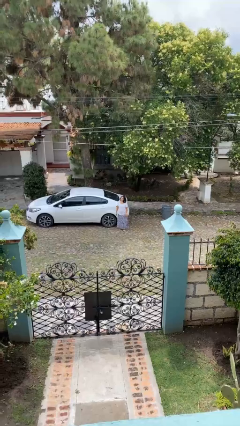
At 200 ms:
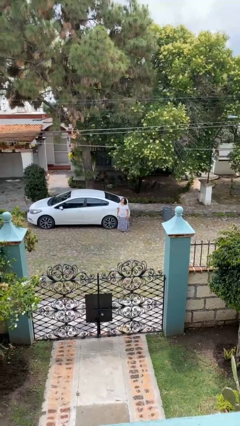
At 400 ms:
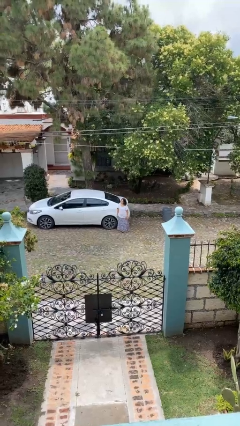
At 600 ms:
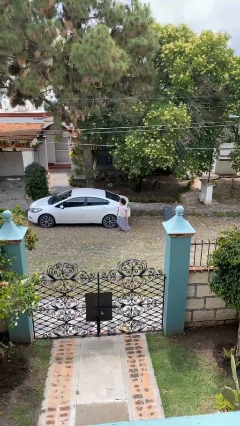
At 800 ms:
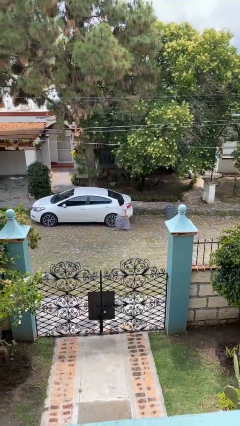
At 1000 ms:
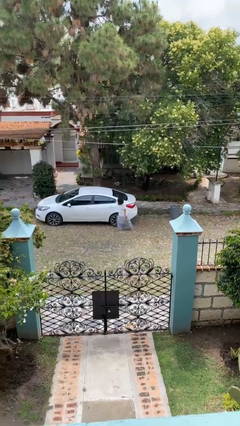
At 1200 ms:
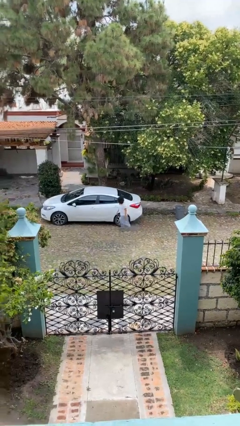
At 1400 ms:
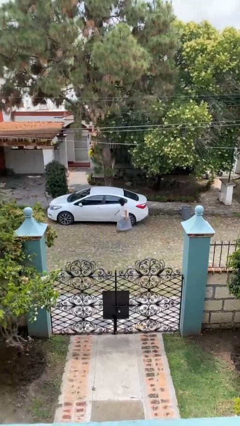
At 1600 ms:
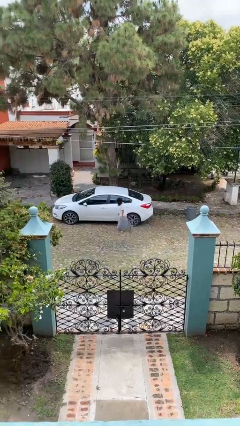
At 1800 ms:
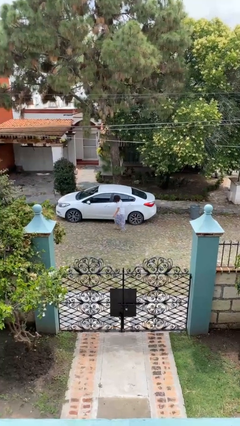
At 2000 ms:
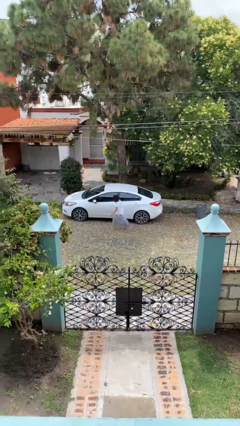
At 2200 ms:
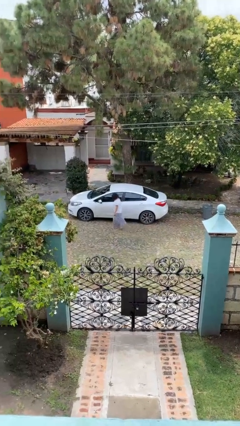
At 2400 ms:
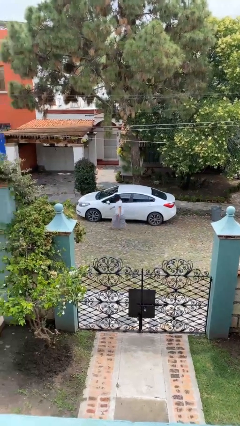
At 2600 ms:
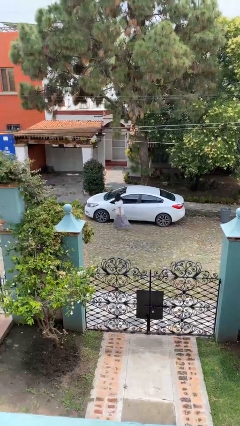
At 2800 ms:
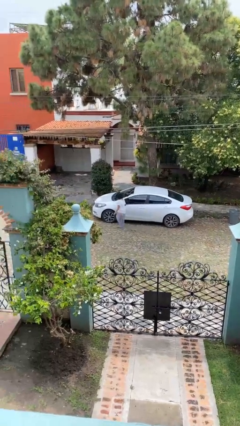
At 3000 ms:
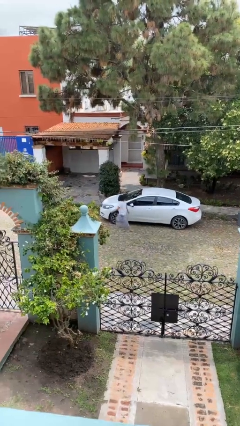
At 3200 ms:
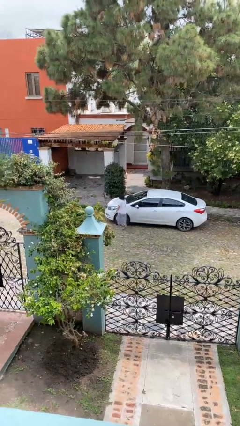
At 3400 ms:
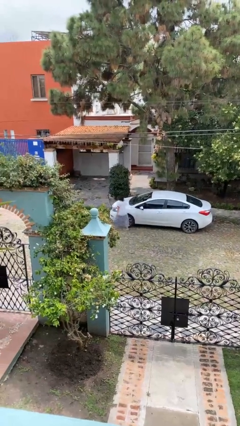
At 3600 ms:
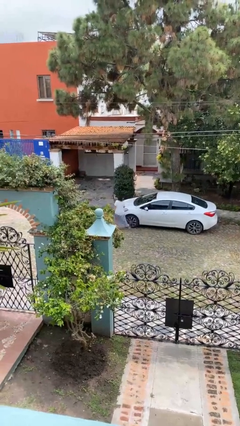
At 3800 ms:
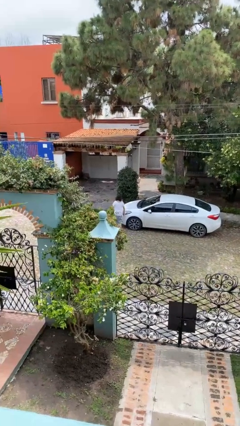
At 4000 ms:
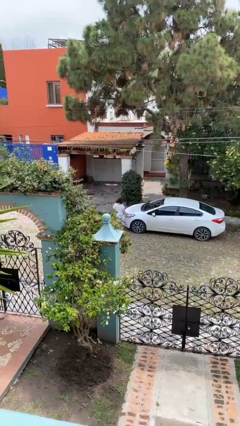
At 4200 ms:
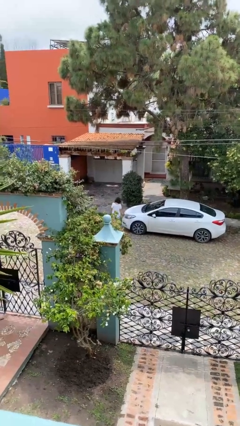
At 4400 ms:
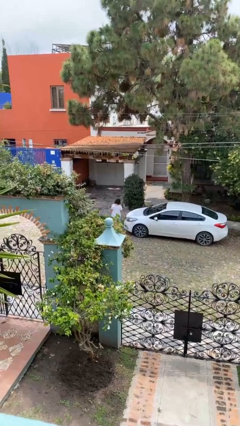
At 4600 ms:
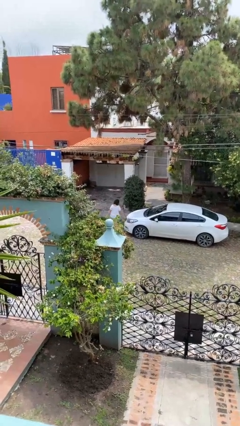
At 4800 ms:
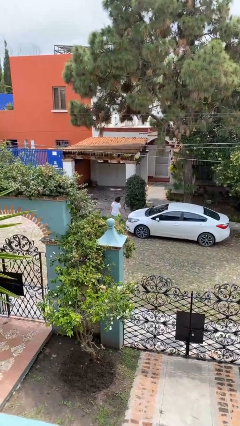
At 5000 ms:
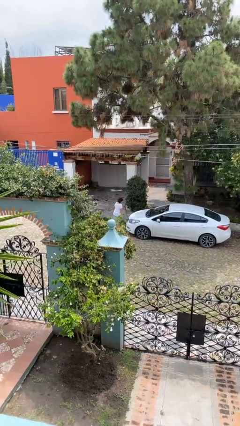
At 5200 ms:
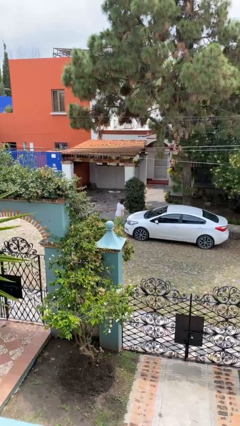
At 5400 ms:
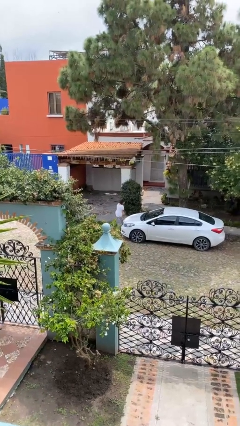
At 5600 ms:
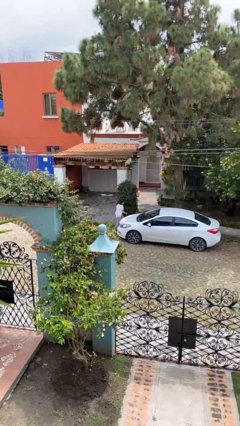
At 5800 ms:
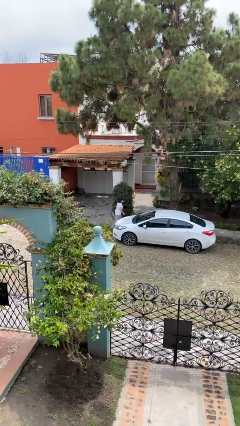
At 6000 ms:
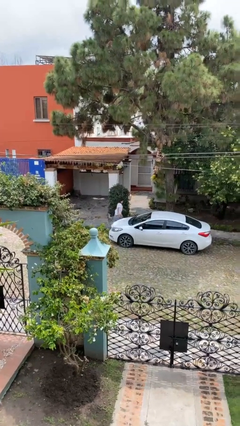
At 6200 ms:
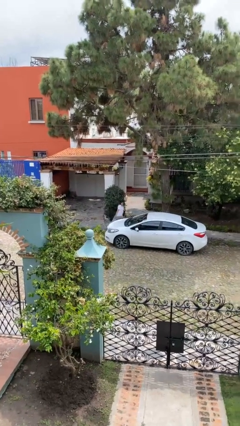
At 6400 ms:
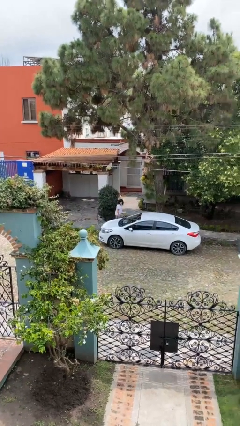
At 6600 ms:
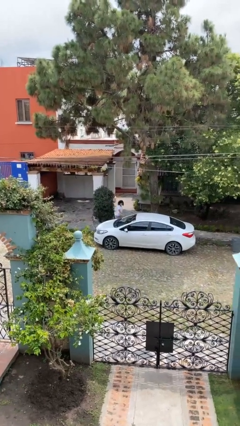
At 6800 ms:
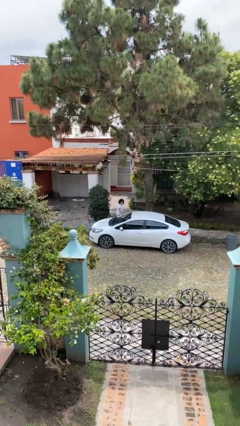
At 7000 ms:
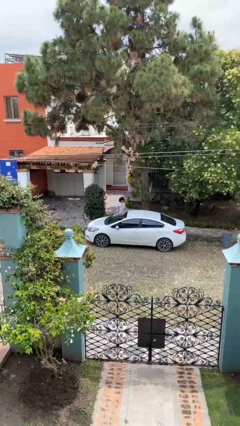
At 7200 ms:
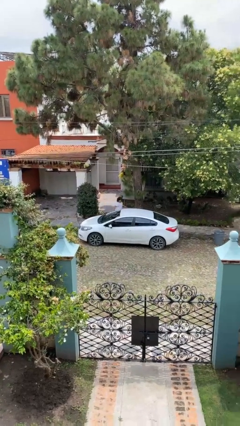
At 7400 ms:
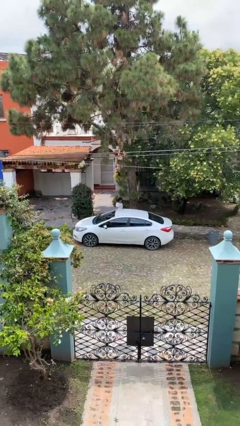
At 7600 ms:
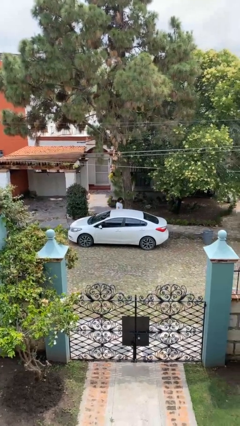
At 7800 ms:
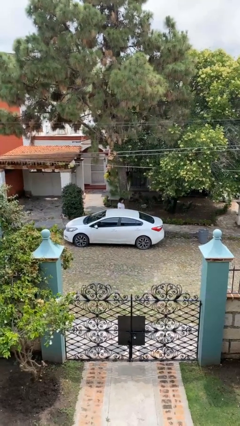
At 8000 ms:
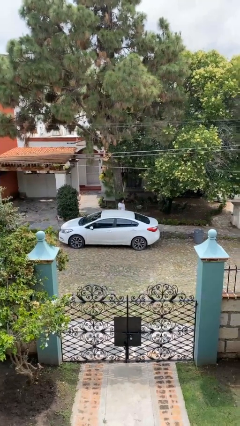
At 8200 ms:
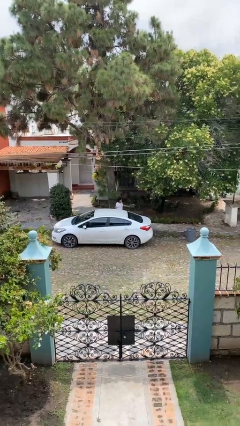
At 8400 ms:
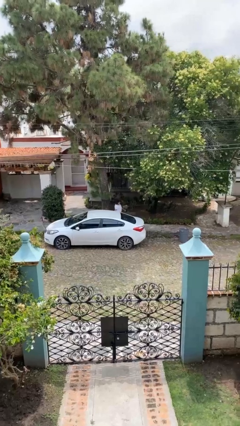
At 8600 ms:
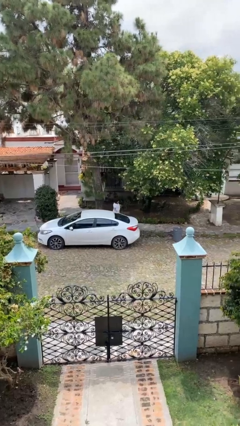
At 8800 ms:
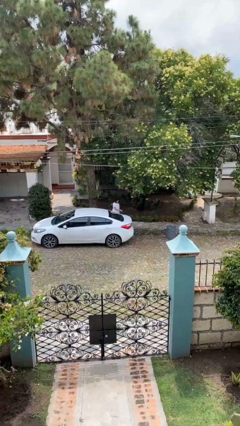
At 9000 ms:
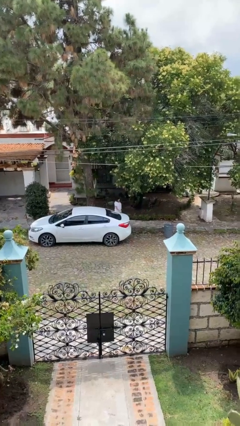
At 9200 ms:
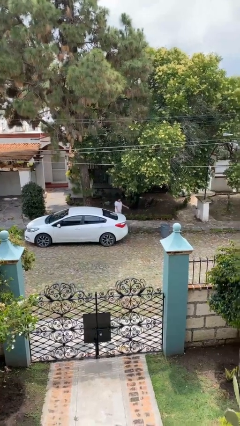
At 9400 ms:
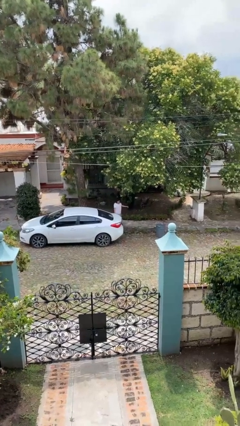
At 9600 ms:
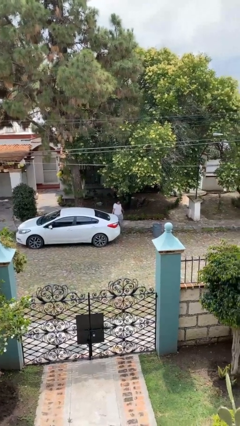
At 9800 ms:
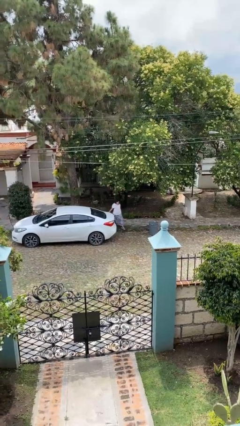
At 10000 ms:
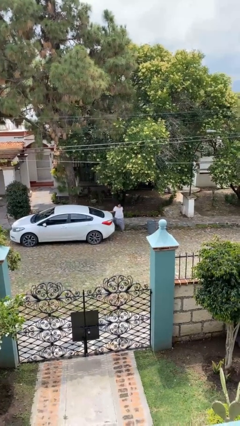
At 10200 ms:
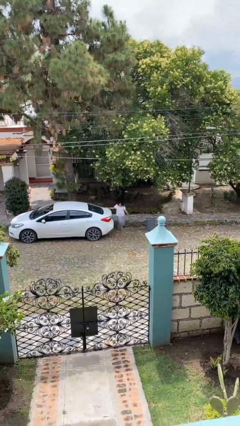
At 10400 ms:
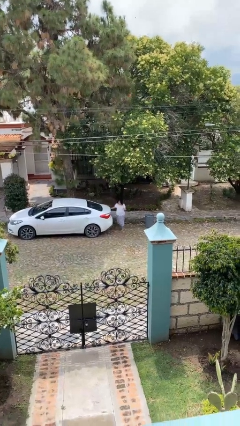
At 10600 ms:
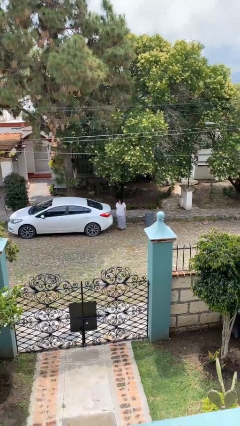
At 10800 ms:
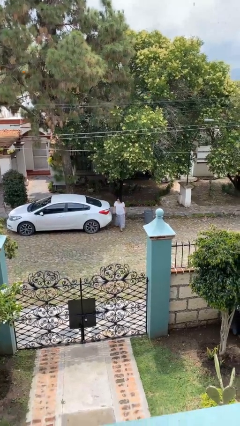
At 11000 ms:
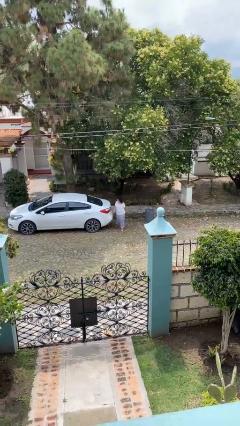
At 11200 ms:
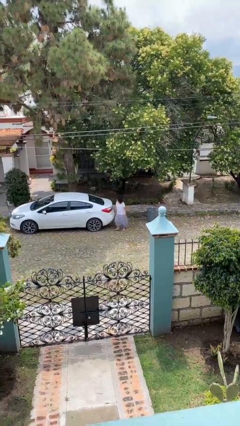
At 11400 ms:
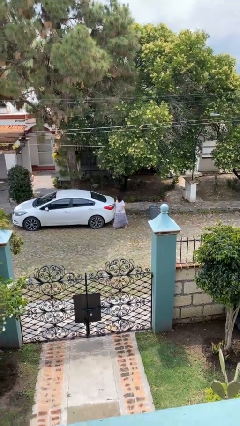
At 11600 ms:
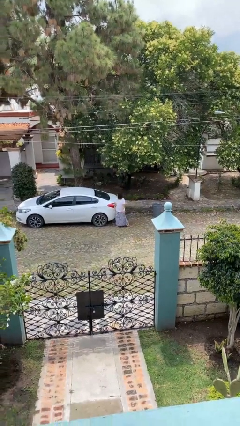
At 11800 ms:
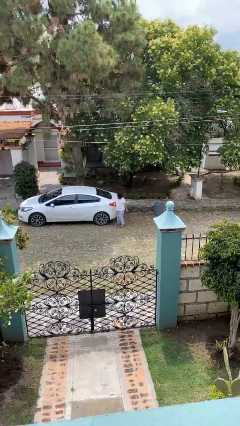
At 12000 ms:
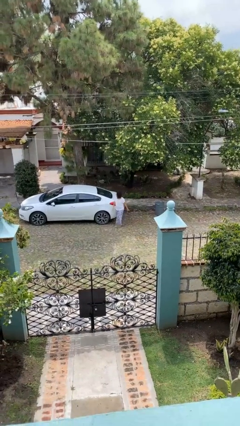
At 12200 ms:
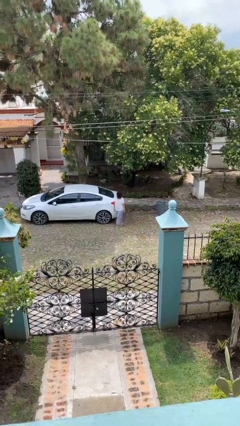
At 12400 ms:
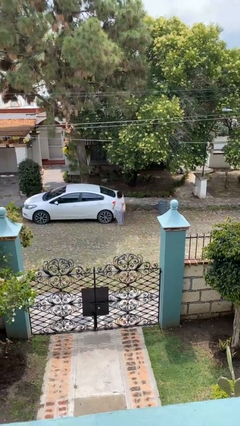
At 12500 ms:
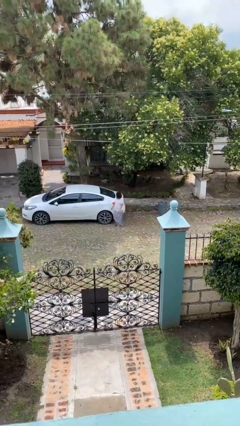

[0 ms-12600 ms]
person walks around car

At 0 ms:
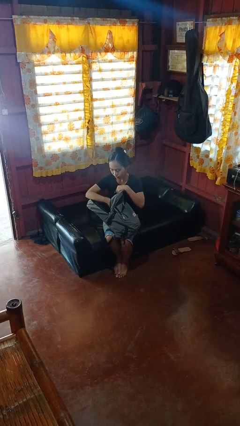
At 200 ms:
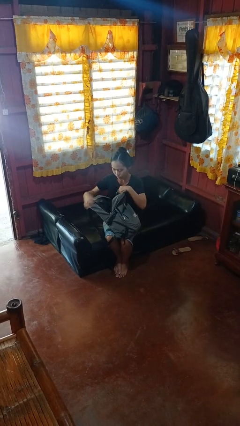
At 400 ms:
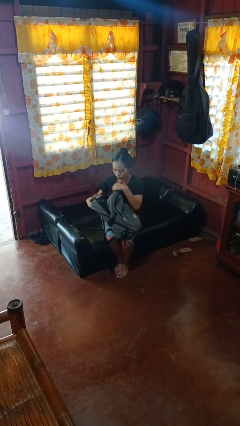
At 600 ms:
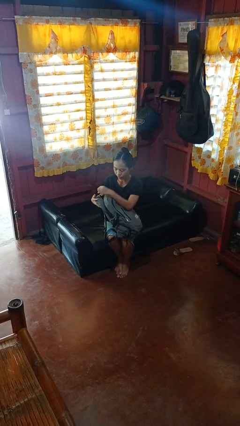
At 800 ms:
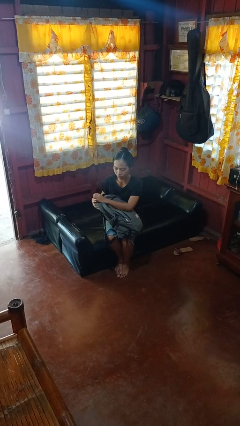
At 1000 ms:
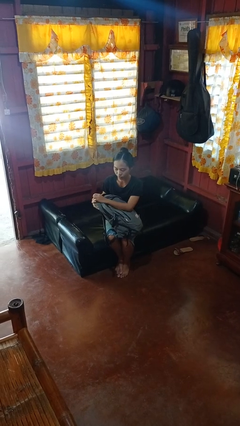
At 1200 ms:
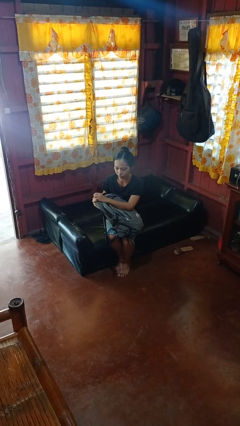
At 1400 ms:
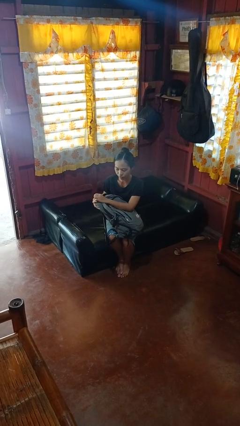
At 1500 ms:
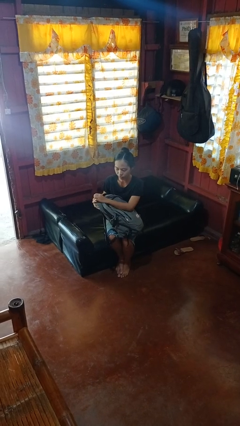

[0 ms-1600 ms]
person puts object into backpack

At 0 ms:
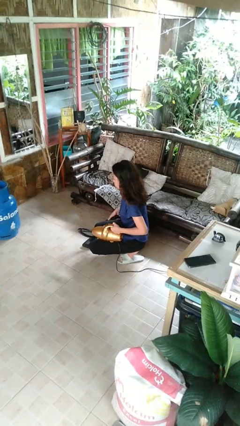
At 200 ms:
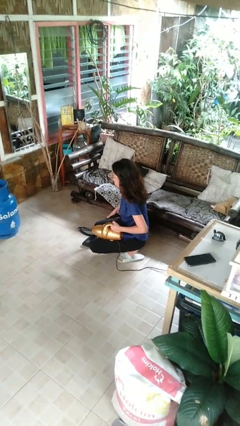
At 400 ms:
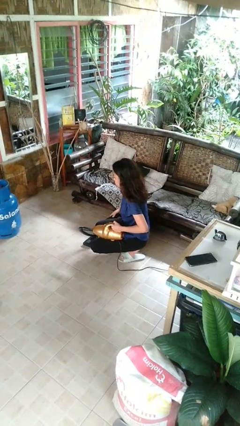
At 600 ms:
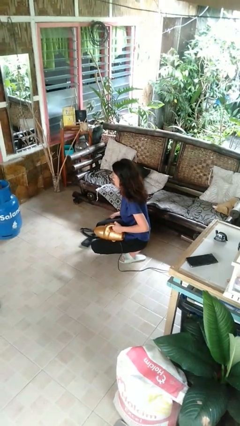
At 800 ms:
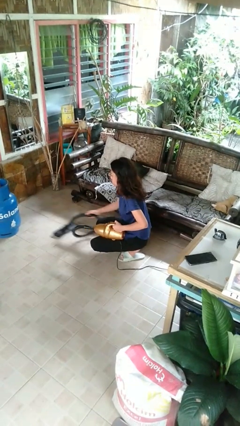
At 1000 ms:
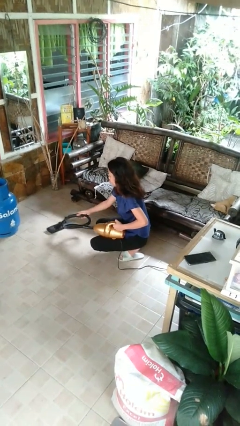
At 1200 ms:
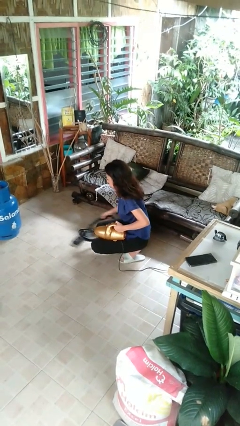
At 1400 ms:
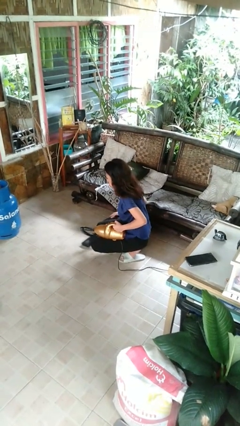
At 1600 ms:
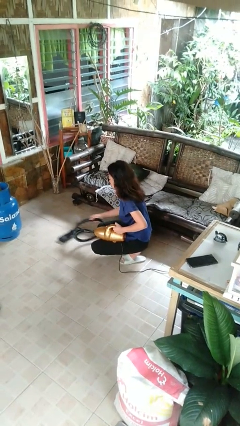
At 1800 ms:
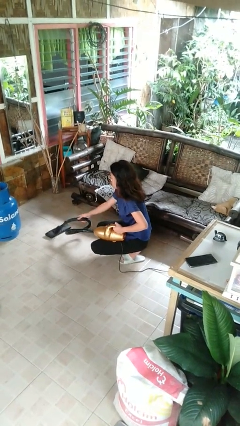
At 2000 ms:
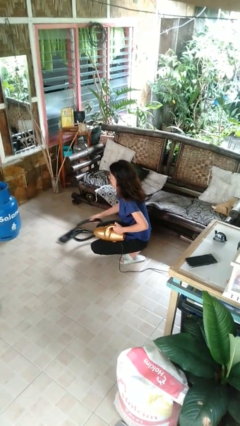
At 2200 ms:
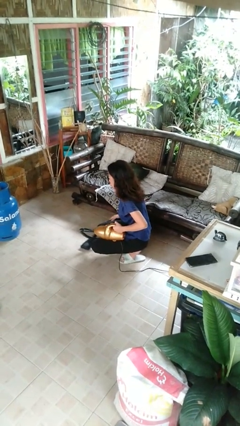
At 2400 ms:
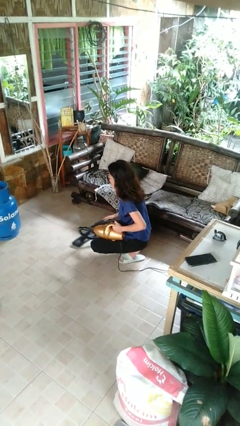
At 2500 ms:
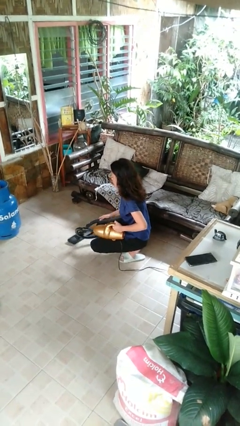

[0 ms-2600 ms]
person vacuums carpet

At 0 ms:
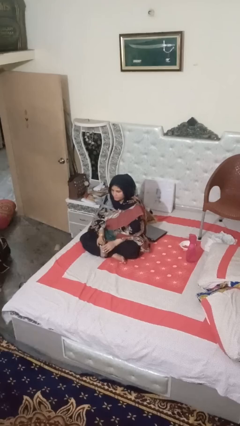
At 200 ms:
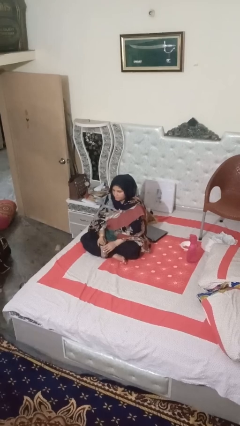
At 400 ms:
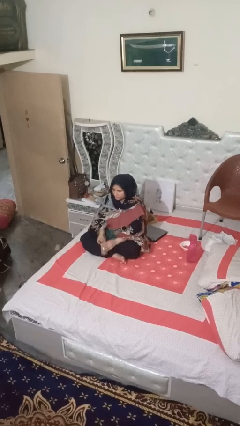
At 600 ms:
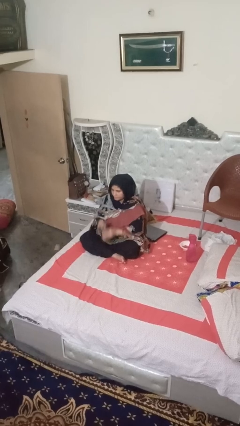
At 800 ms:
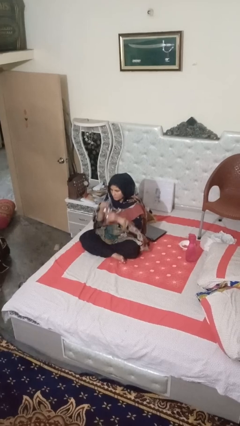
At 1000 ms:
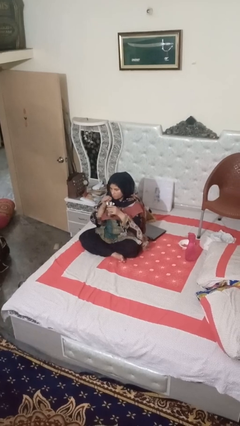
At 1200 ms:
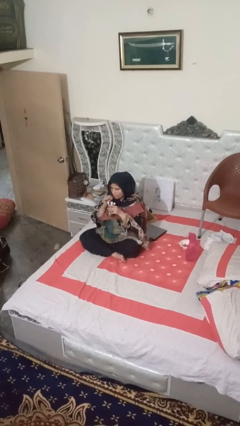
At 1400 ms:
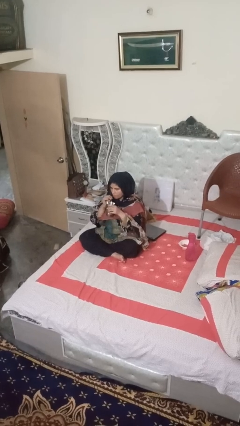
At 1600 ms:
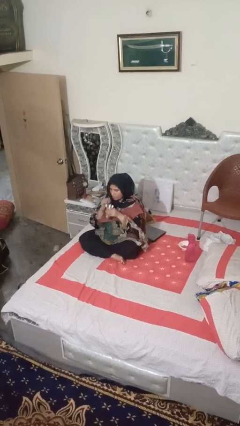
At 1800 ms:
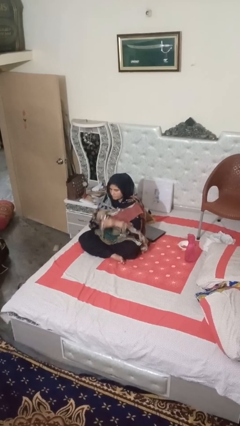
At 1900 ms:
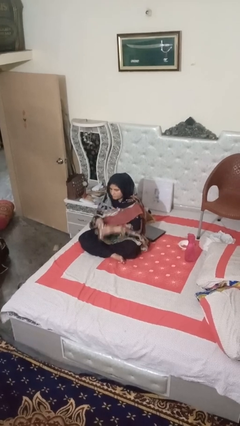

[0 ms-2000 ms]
person drinks from straw
